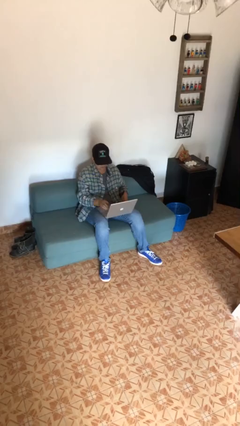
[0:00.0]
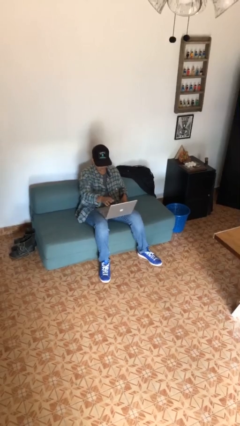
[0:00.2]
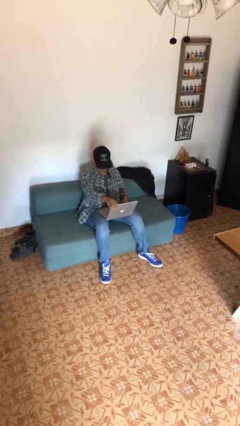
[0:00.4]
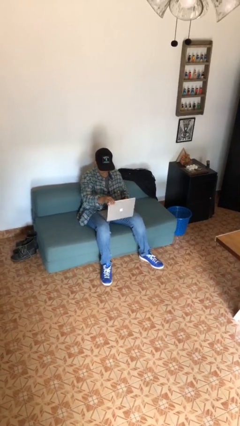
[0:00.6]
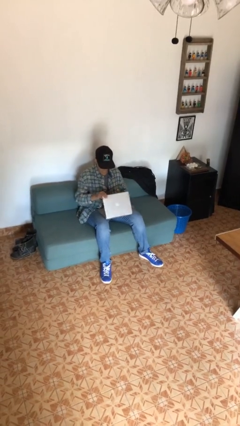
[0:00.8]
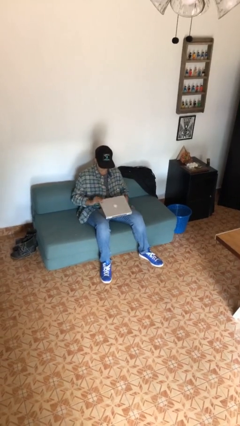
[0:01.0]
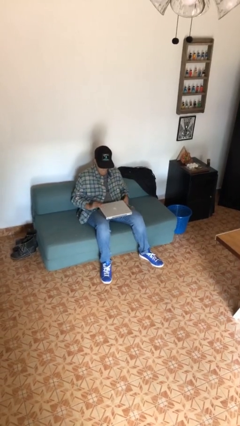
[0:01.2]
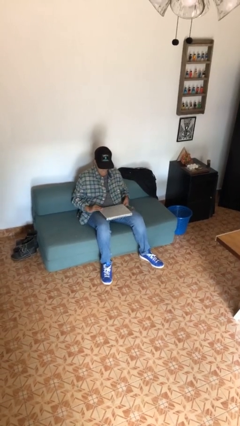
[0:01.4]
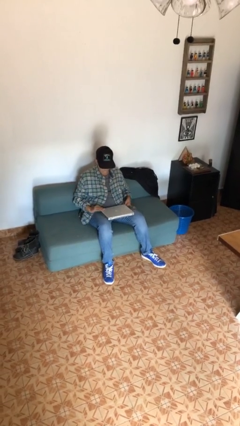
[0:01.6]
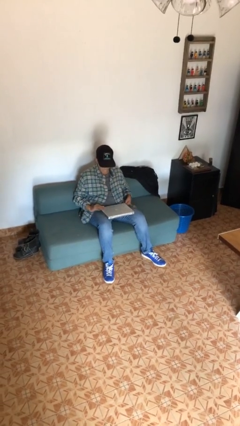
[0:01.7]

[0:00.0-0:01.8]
person closes laptop

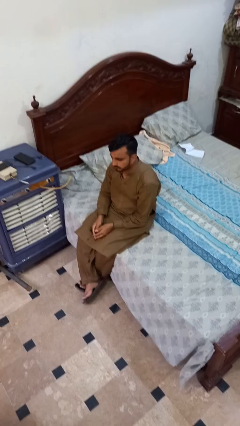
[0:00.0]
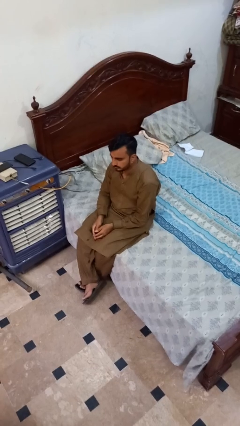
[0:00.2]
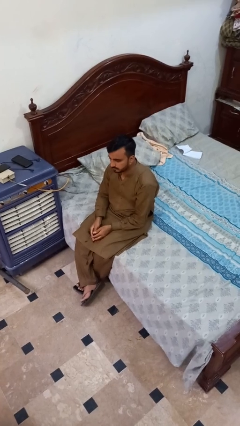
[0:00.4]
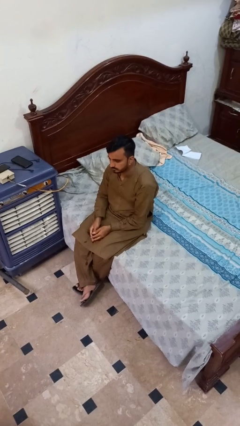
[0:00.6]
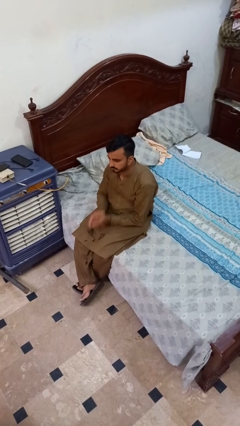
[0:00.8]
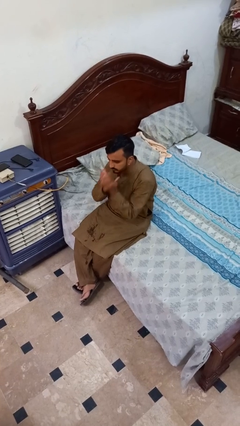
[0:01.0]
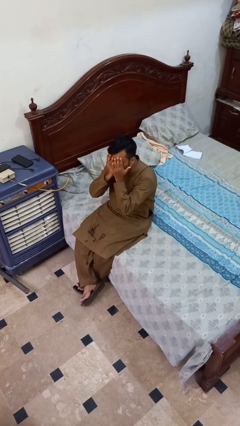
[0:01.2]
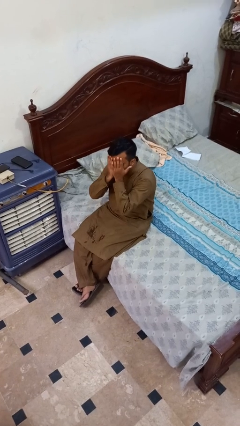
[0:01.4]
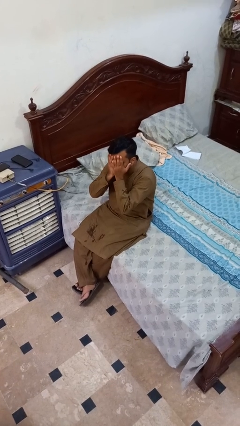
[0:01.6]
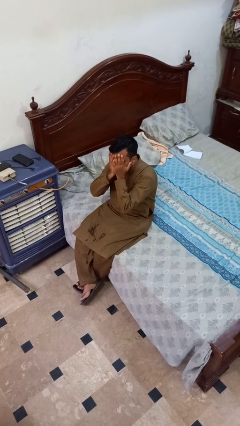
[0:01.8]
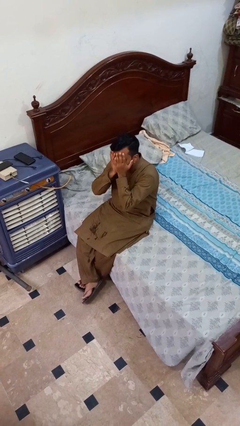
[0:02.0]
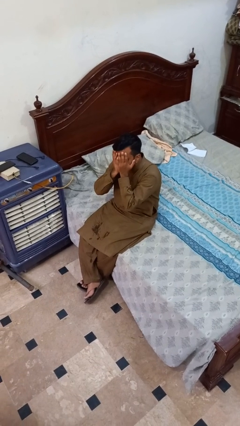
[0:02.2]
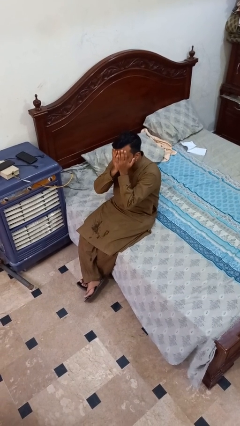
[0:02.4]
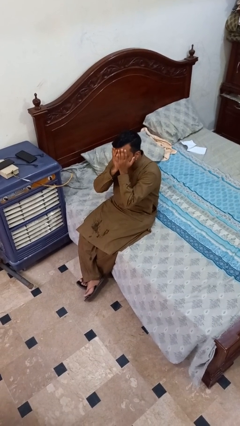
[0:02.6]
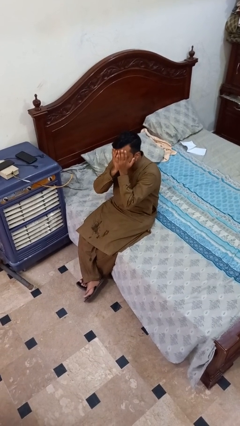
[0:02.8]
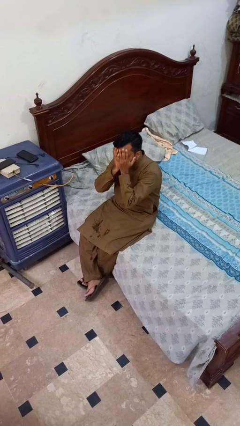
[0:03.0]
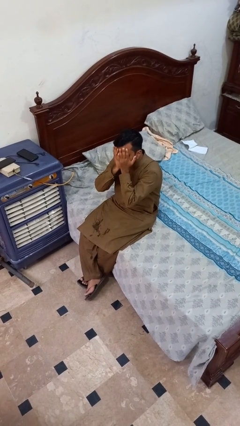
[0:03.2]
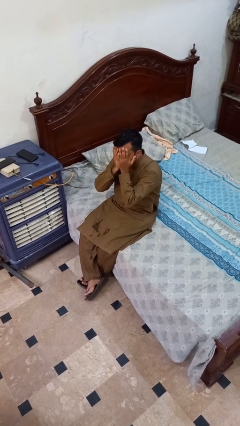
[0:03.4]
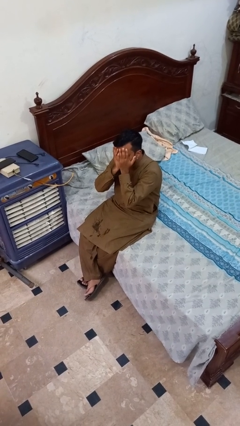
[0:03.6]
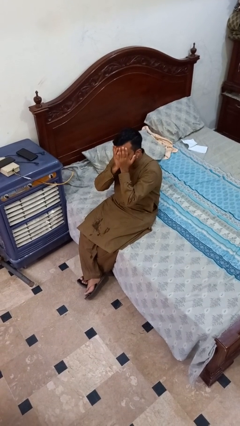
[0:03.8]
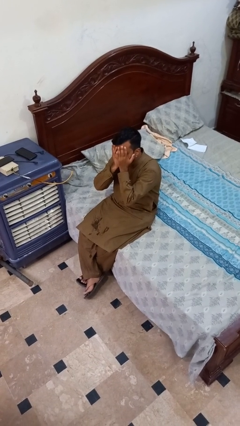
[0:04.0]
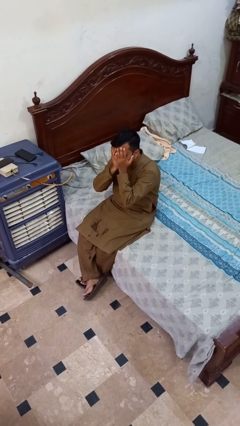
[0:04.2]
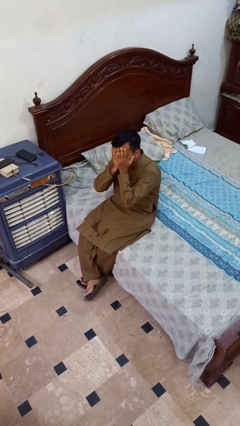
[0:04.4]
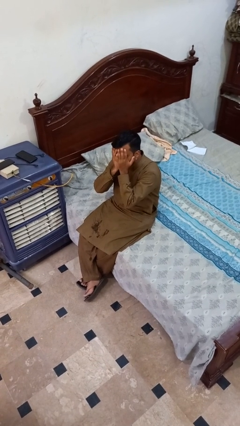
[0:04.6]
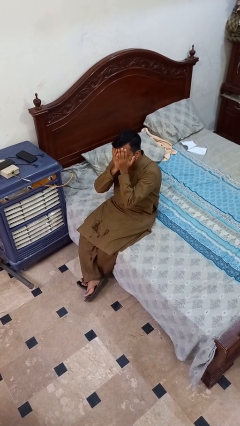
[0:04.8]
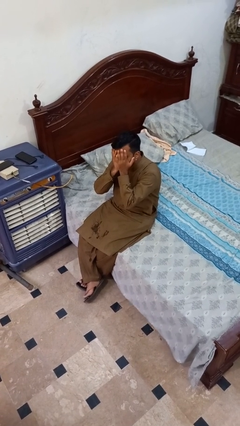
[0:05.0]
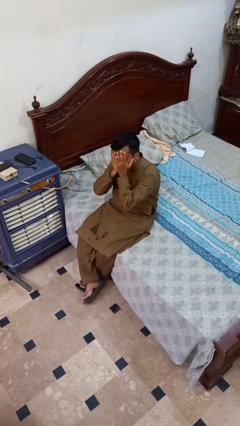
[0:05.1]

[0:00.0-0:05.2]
person covers face with hands

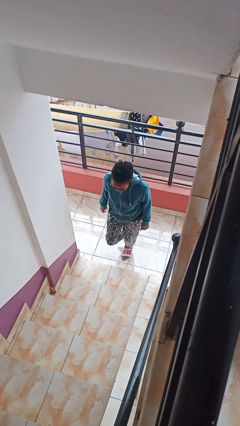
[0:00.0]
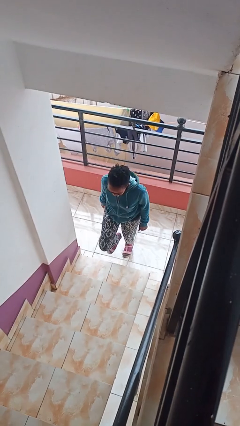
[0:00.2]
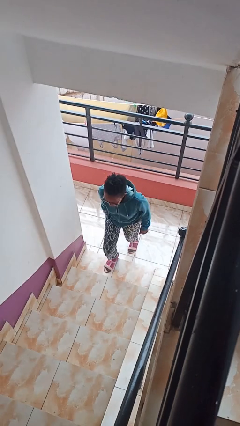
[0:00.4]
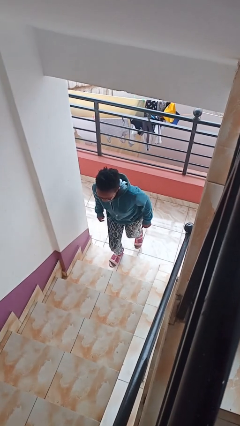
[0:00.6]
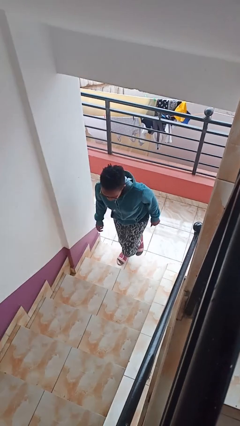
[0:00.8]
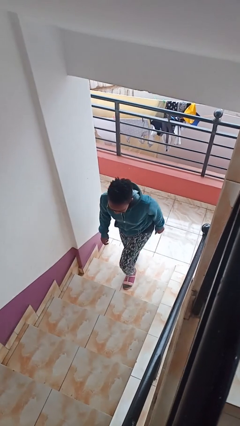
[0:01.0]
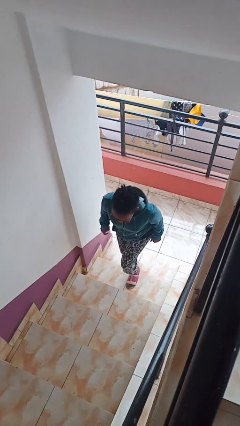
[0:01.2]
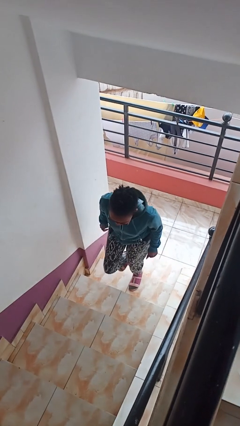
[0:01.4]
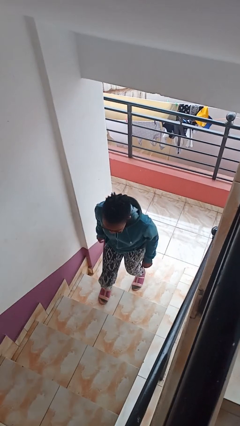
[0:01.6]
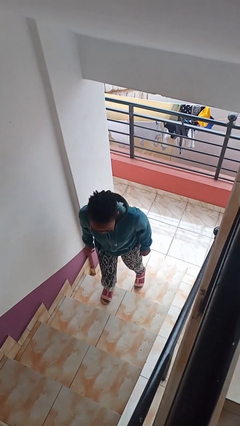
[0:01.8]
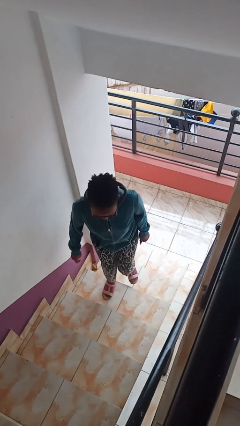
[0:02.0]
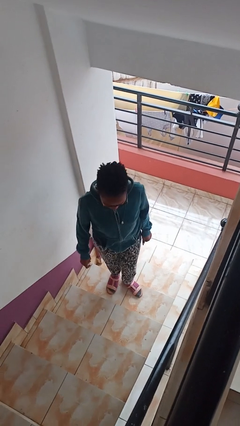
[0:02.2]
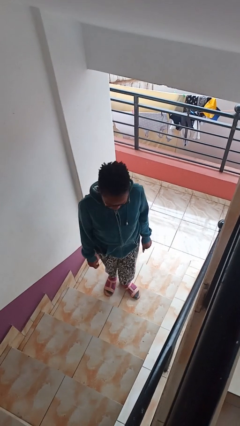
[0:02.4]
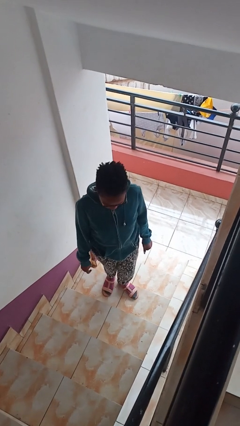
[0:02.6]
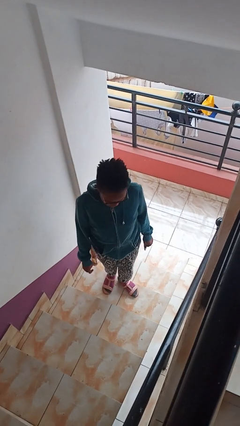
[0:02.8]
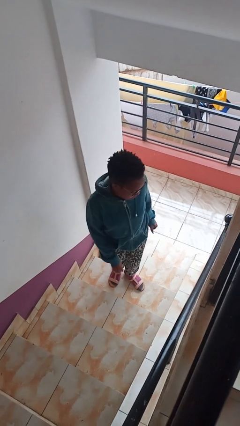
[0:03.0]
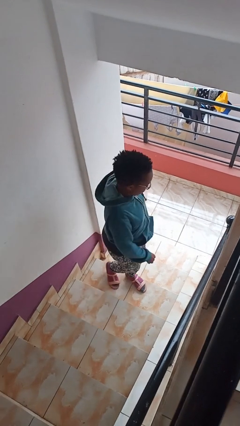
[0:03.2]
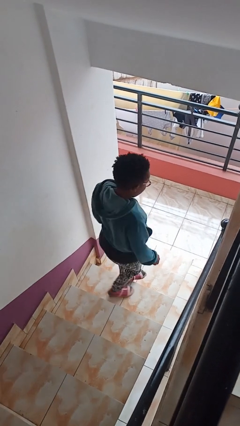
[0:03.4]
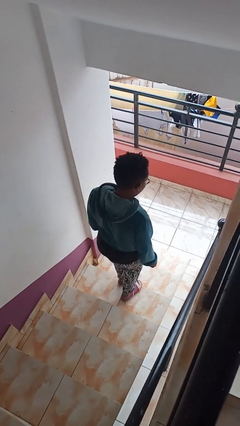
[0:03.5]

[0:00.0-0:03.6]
person climbs up stairs

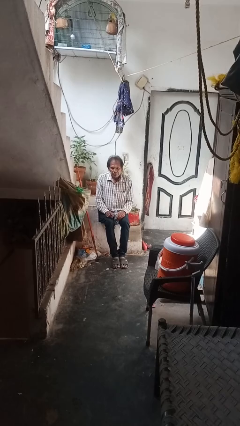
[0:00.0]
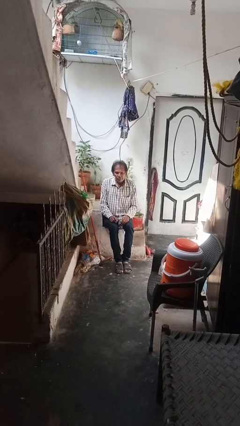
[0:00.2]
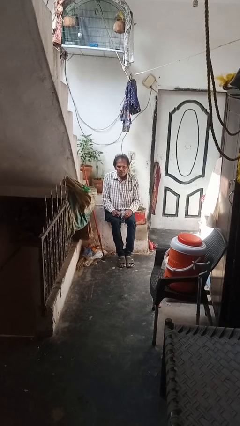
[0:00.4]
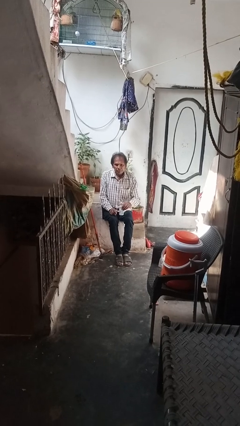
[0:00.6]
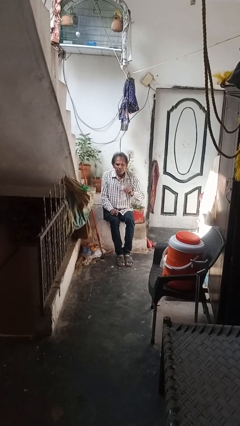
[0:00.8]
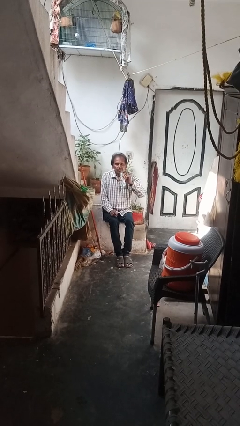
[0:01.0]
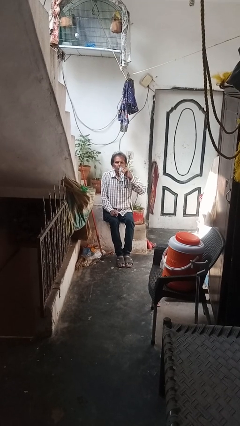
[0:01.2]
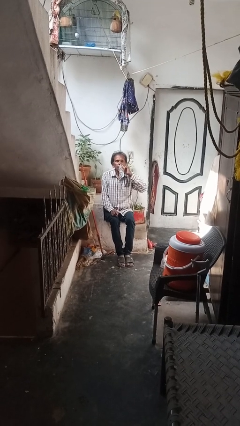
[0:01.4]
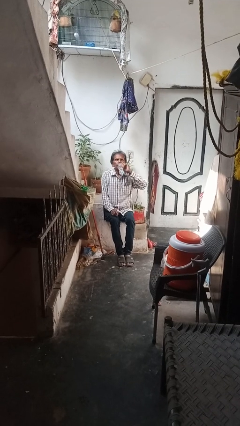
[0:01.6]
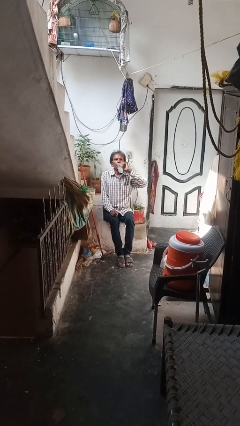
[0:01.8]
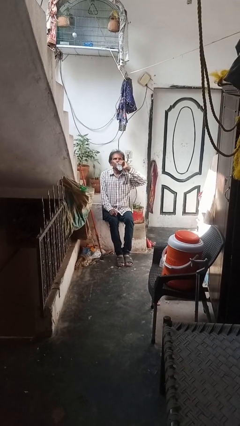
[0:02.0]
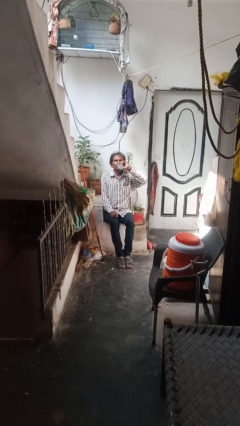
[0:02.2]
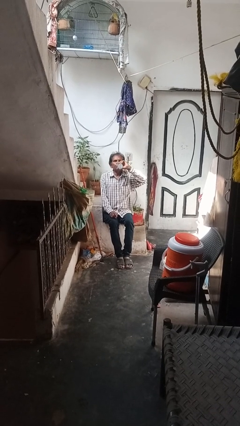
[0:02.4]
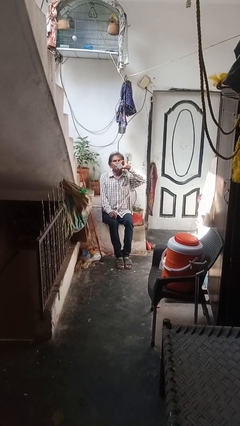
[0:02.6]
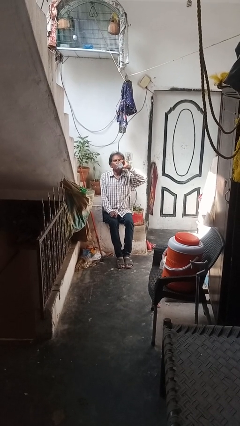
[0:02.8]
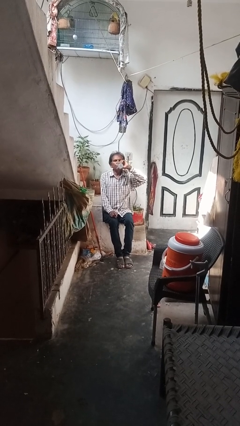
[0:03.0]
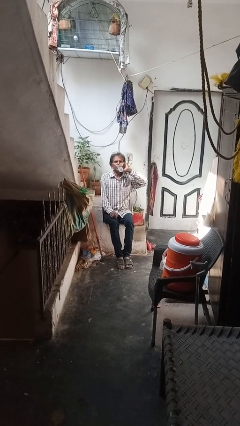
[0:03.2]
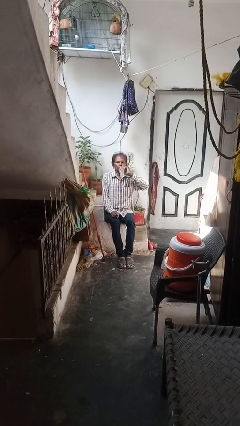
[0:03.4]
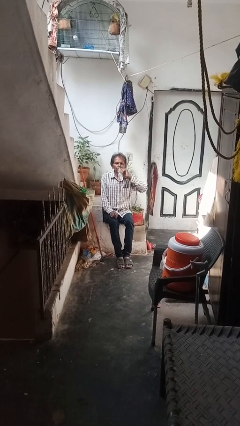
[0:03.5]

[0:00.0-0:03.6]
person drinks from bottle

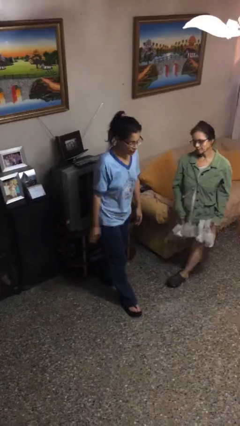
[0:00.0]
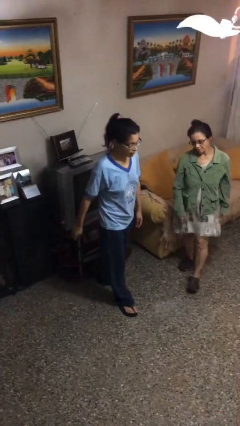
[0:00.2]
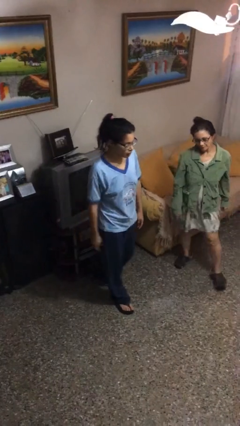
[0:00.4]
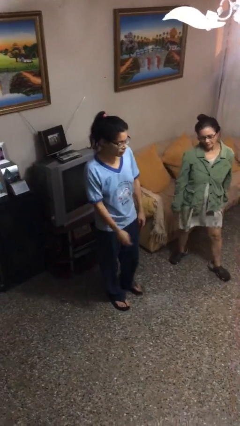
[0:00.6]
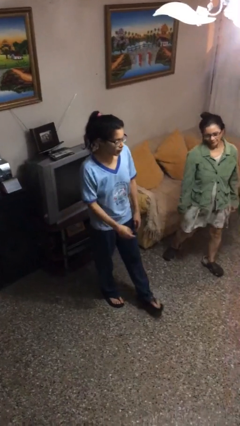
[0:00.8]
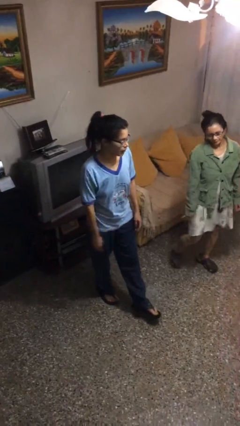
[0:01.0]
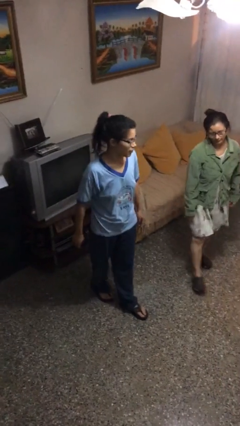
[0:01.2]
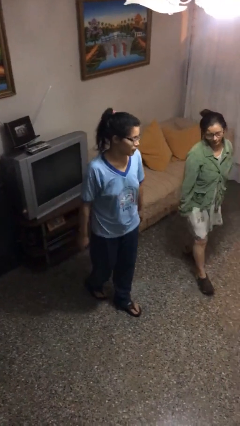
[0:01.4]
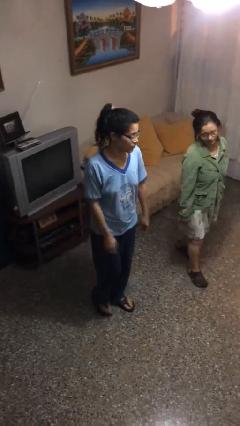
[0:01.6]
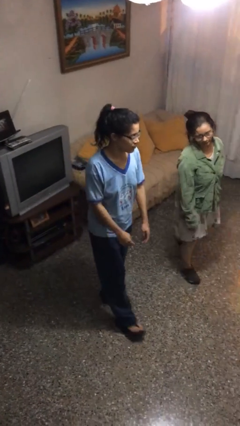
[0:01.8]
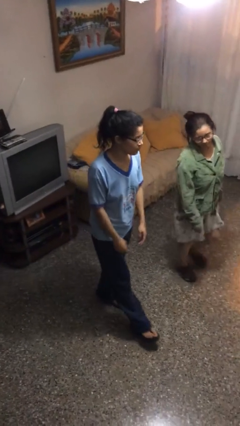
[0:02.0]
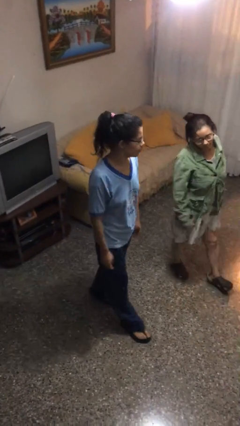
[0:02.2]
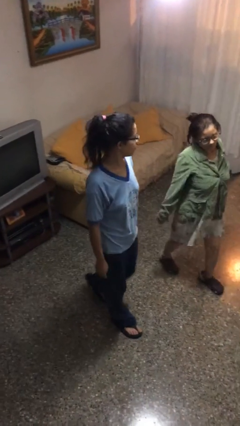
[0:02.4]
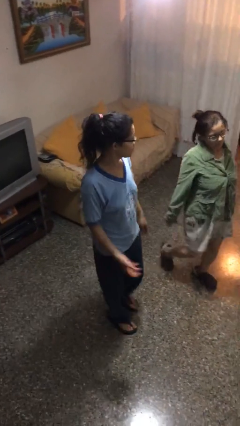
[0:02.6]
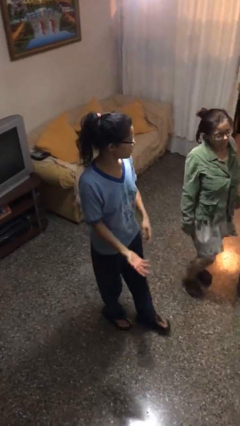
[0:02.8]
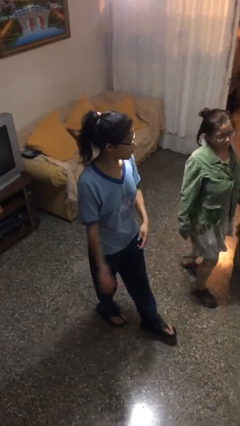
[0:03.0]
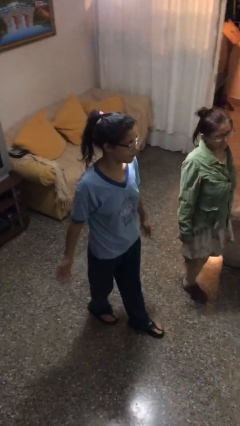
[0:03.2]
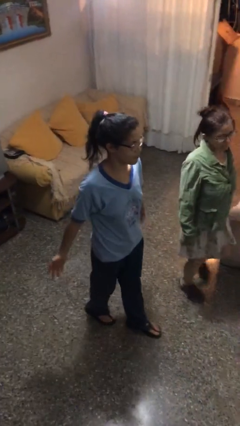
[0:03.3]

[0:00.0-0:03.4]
person talks to person
